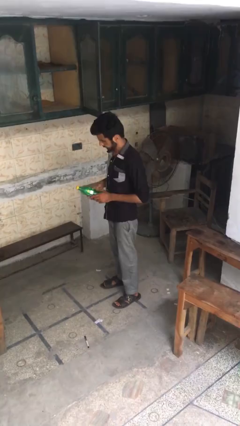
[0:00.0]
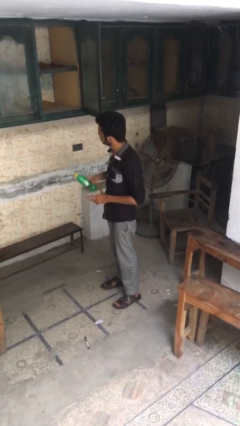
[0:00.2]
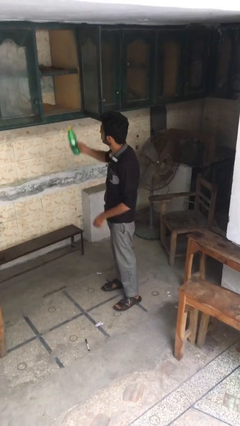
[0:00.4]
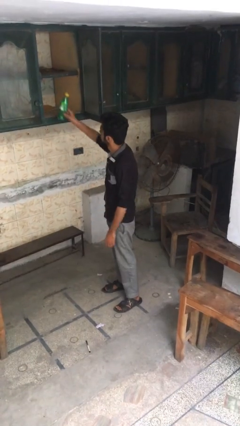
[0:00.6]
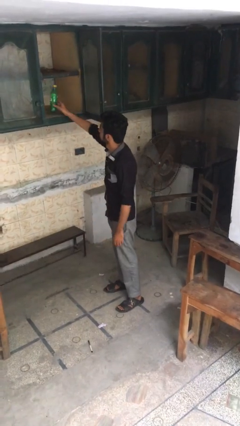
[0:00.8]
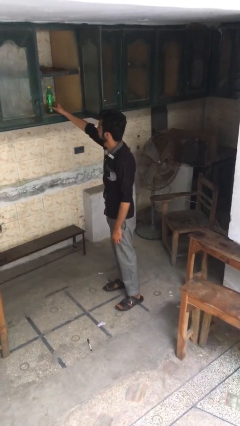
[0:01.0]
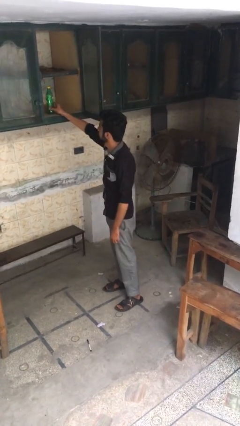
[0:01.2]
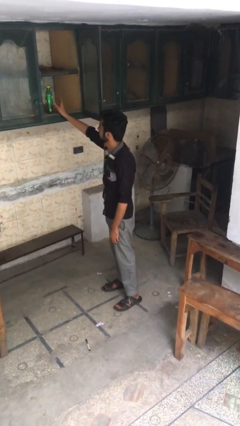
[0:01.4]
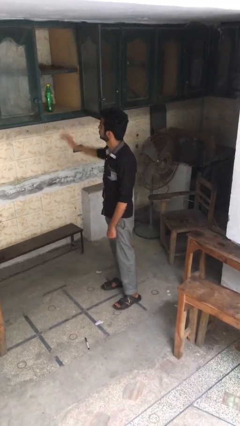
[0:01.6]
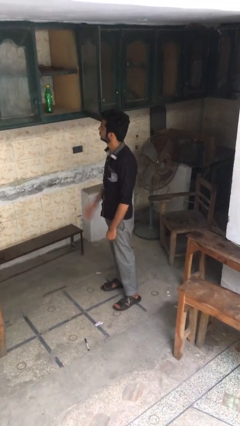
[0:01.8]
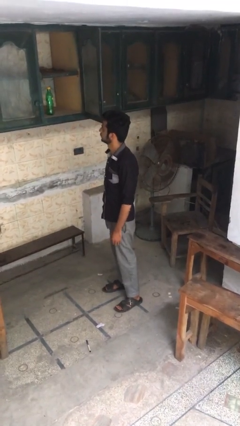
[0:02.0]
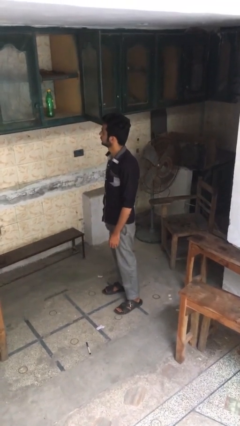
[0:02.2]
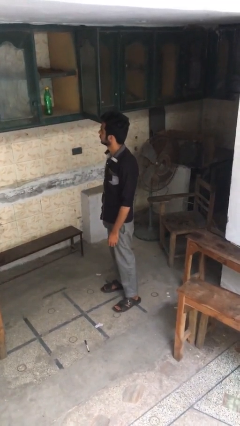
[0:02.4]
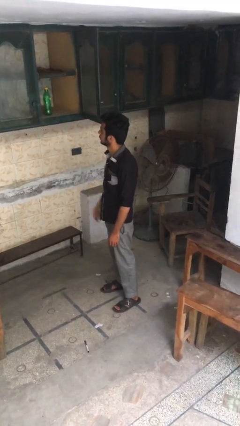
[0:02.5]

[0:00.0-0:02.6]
person puts object in cabinet

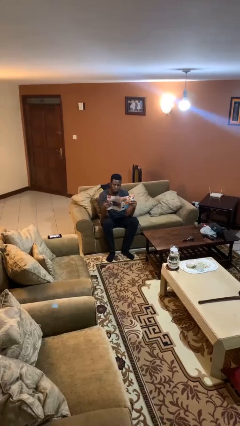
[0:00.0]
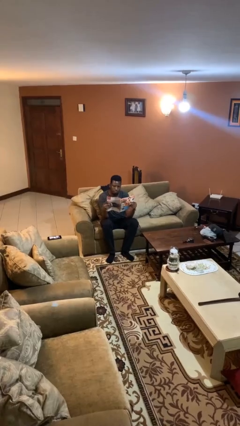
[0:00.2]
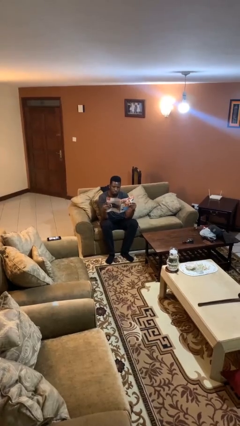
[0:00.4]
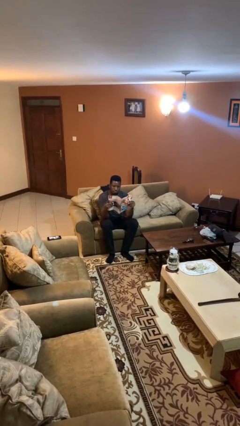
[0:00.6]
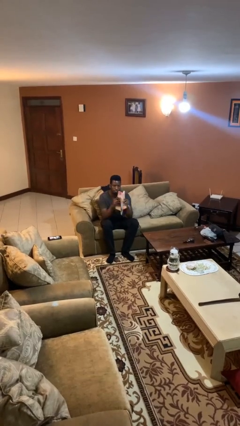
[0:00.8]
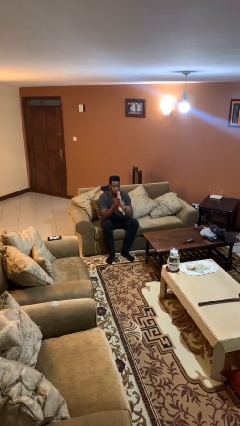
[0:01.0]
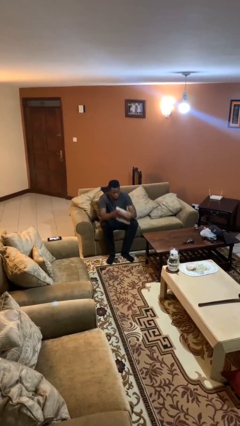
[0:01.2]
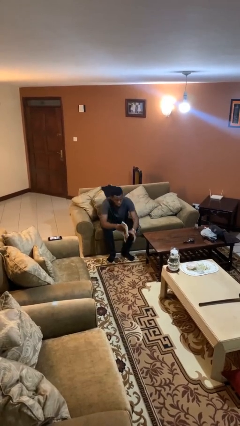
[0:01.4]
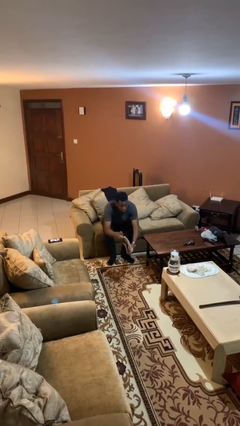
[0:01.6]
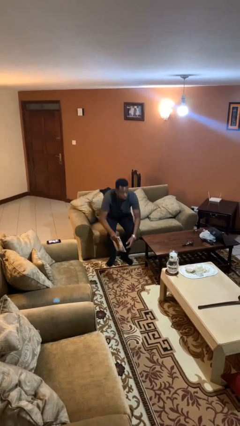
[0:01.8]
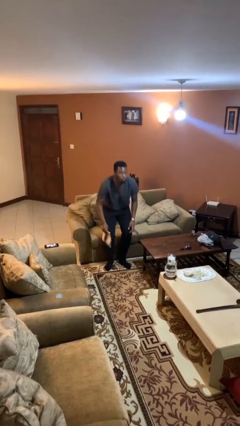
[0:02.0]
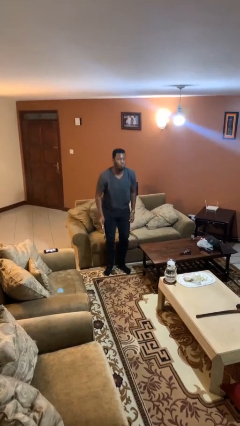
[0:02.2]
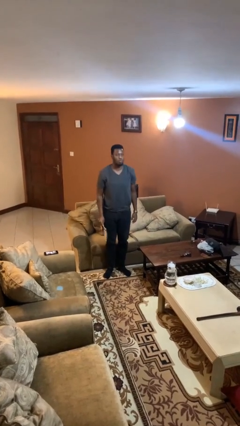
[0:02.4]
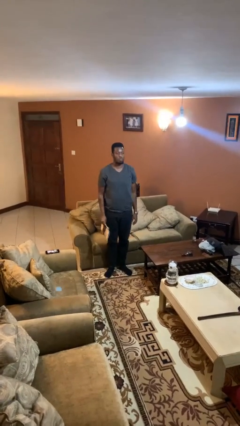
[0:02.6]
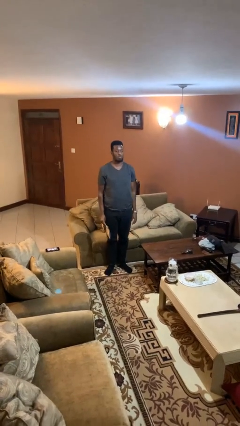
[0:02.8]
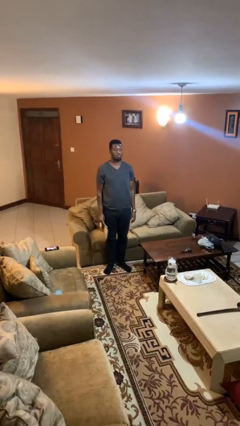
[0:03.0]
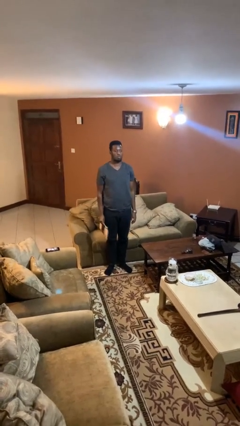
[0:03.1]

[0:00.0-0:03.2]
person stands up

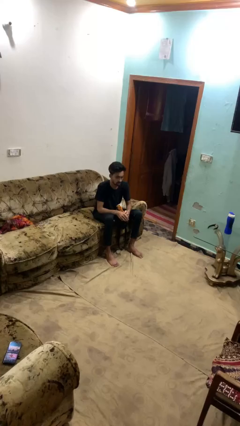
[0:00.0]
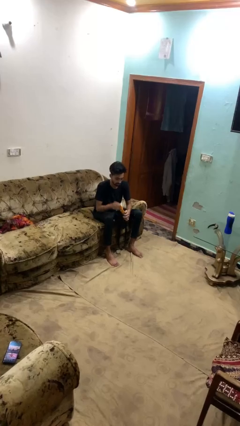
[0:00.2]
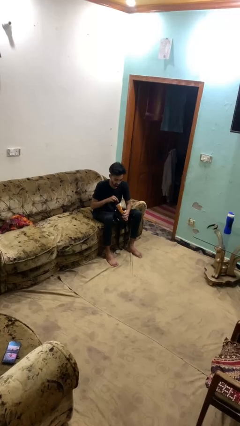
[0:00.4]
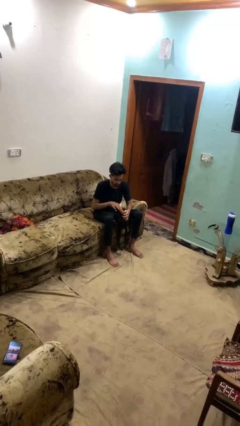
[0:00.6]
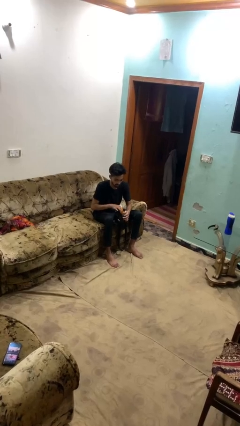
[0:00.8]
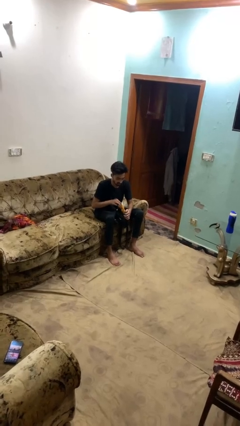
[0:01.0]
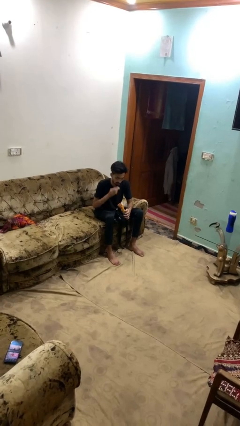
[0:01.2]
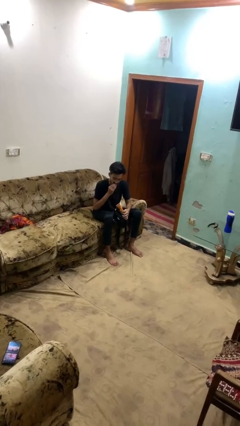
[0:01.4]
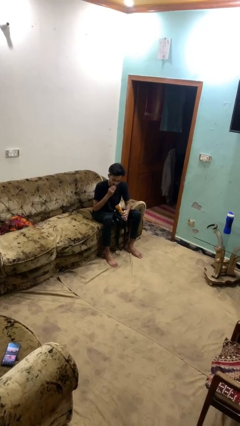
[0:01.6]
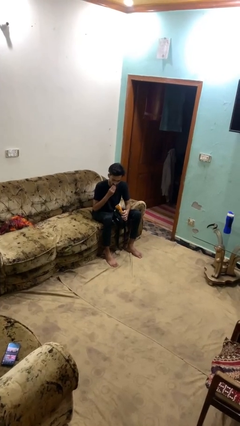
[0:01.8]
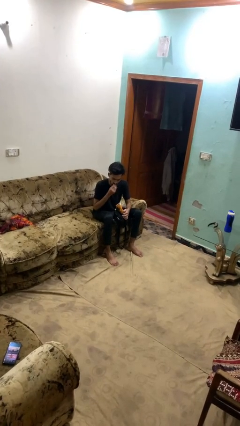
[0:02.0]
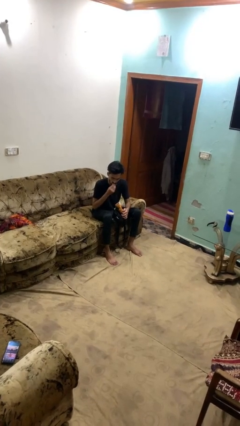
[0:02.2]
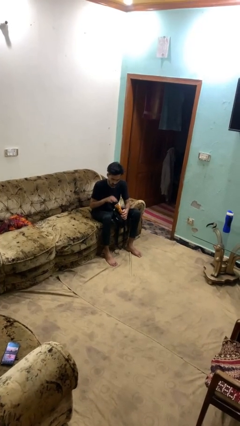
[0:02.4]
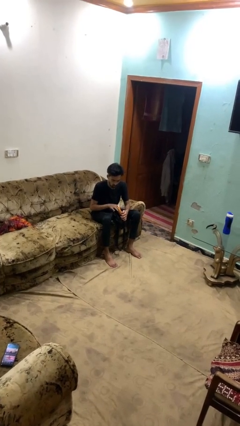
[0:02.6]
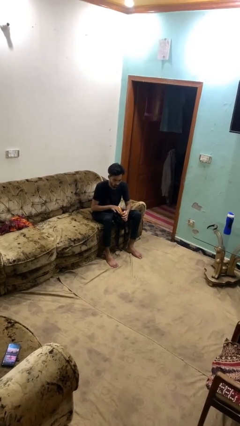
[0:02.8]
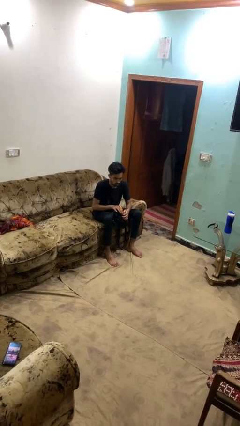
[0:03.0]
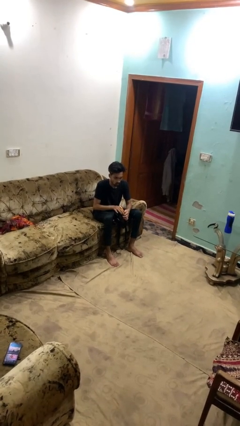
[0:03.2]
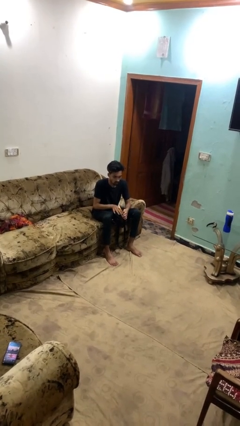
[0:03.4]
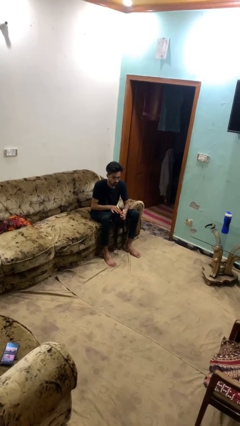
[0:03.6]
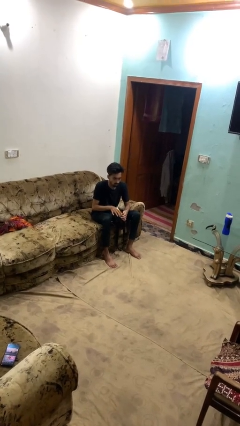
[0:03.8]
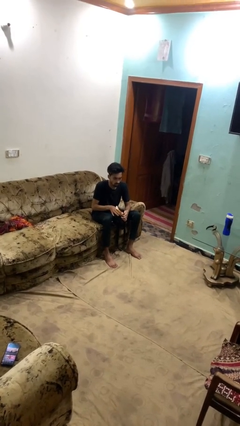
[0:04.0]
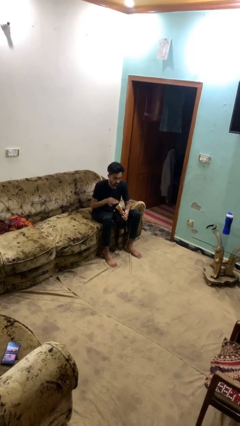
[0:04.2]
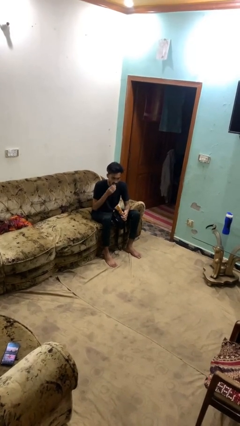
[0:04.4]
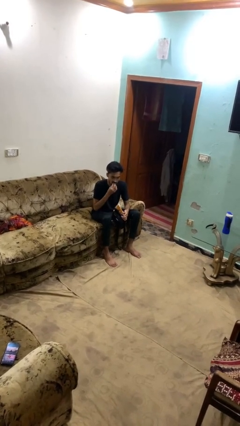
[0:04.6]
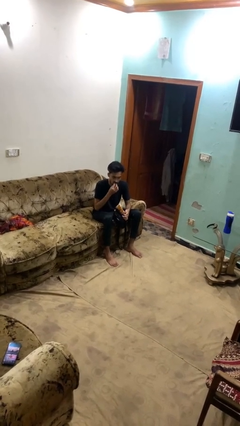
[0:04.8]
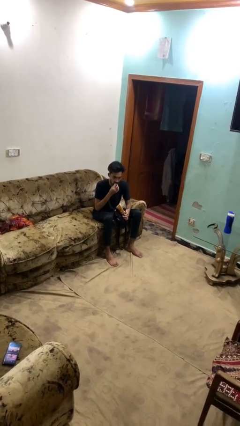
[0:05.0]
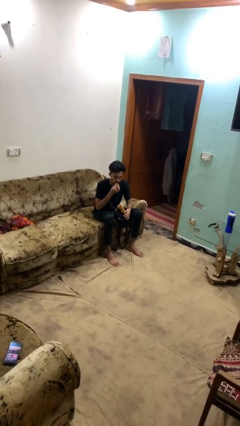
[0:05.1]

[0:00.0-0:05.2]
person eats snack from bag

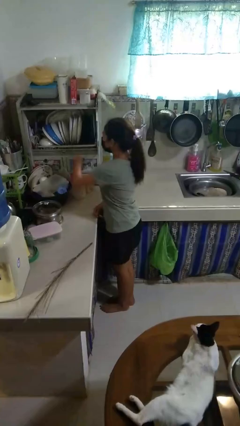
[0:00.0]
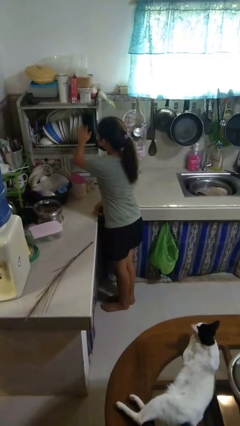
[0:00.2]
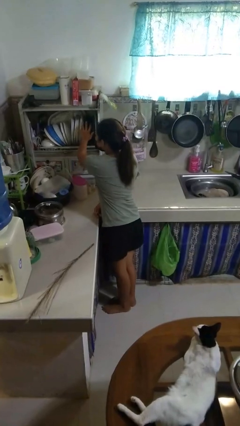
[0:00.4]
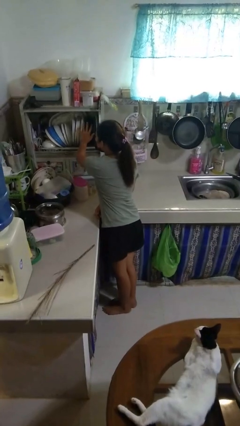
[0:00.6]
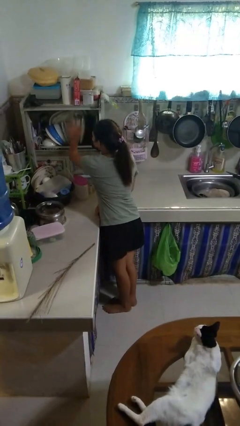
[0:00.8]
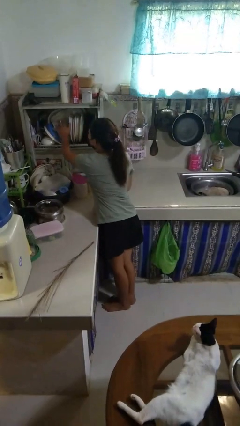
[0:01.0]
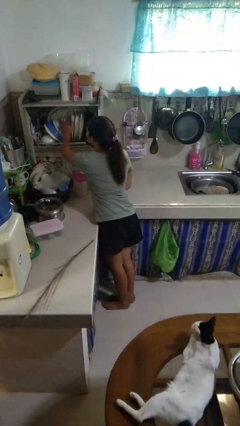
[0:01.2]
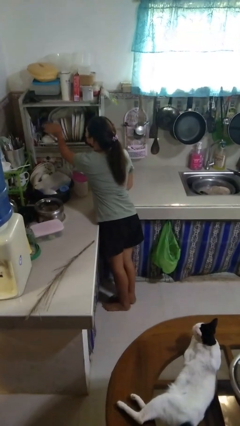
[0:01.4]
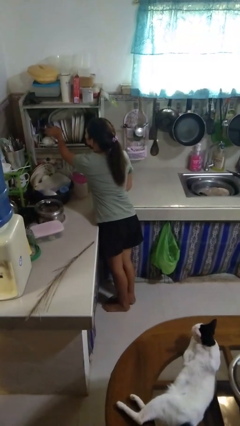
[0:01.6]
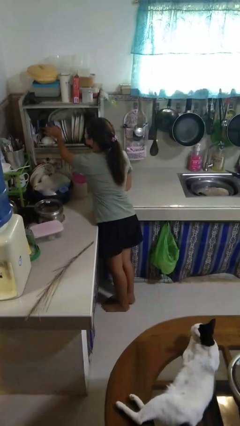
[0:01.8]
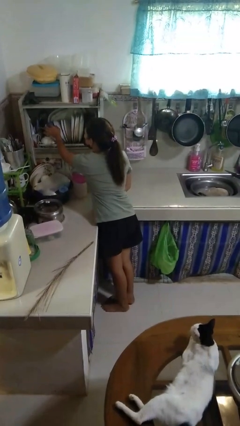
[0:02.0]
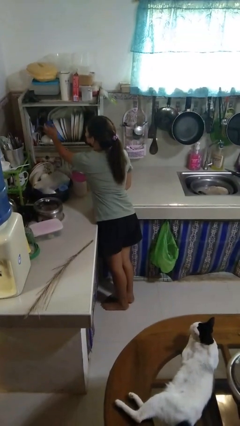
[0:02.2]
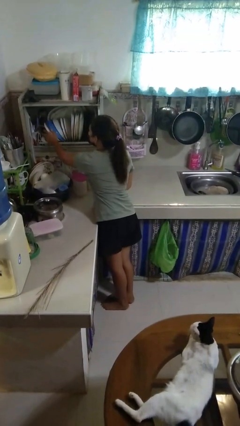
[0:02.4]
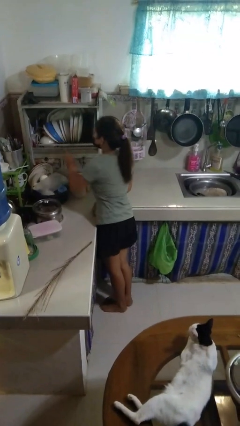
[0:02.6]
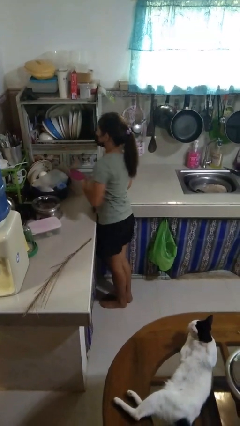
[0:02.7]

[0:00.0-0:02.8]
person searches in kitchen drawer

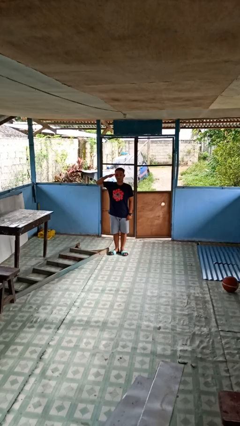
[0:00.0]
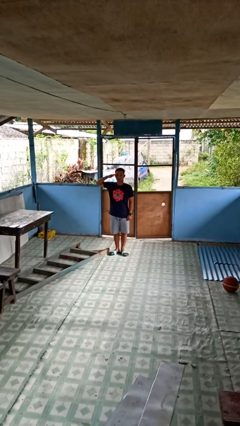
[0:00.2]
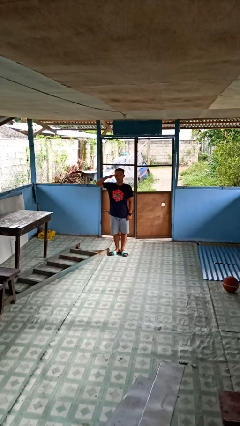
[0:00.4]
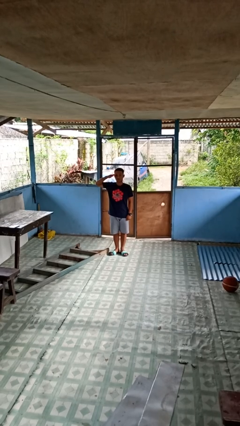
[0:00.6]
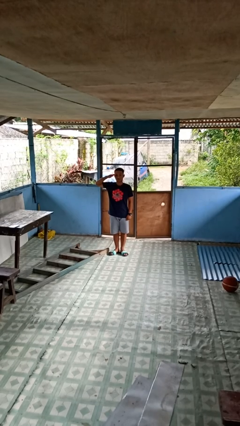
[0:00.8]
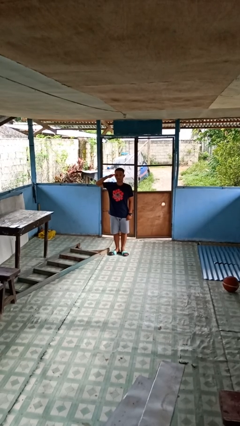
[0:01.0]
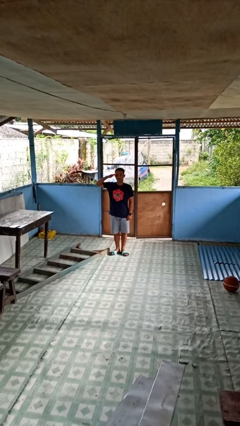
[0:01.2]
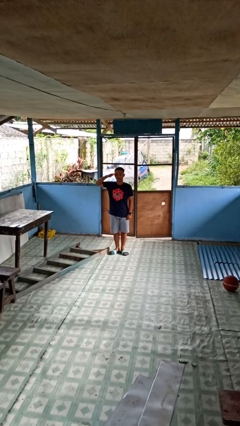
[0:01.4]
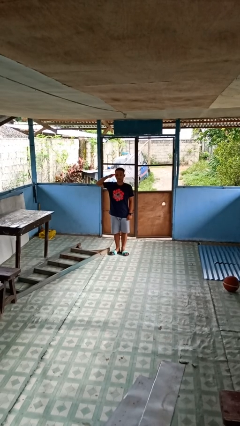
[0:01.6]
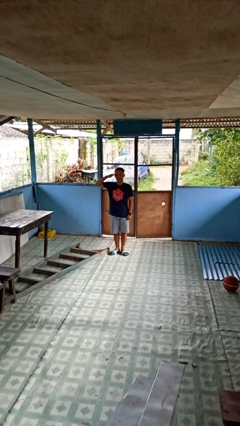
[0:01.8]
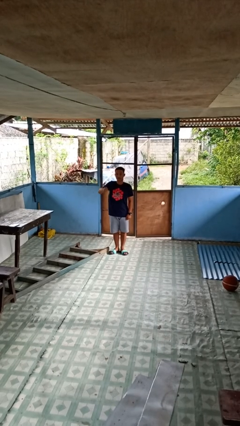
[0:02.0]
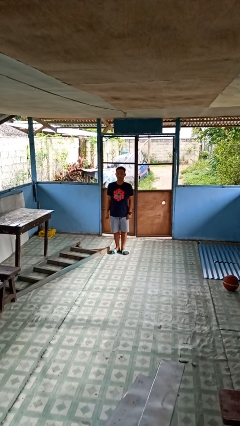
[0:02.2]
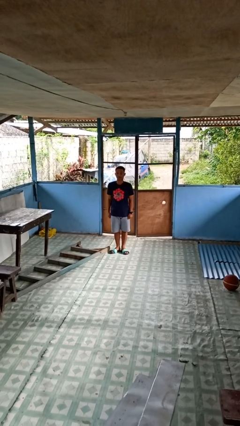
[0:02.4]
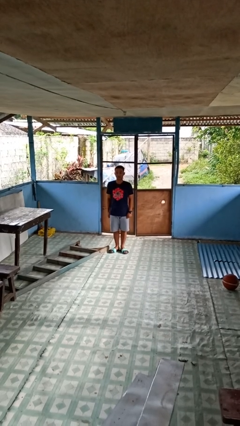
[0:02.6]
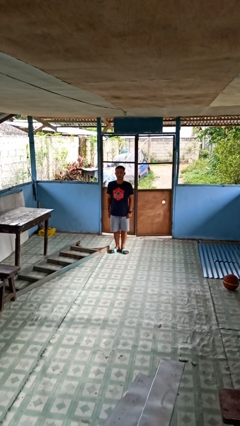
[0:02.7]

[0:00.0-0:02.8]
person salutes

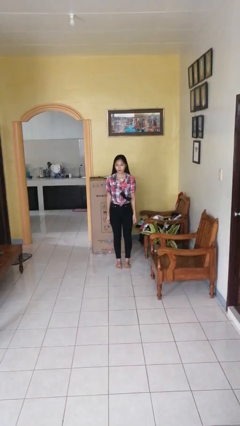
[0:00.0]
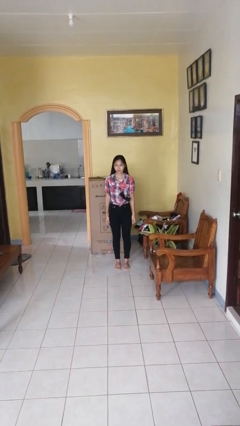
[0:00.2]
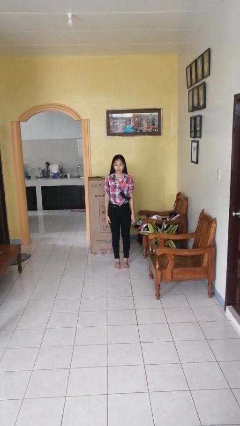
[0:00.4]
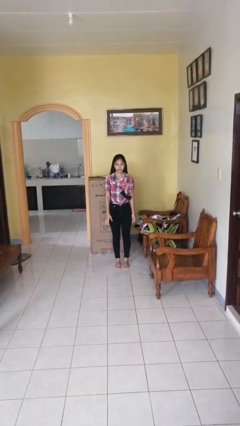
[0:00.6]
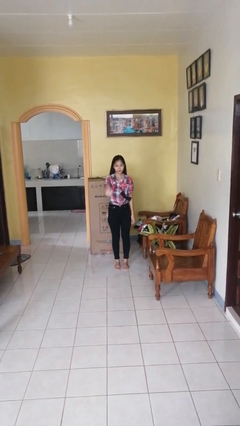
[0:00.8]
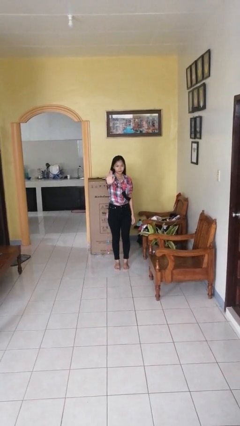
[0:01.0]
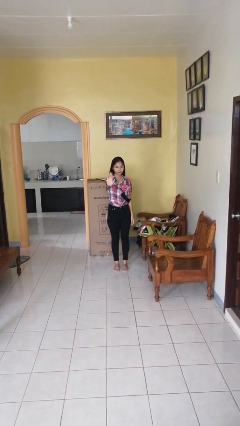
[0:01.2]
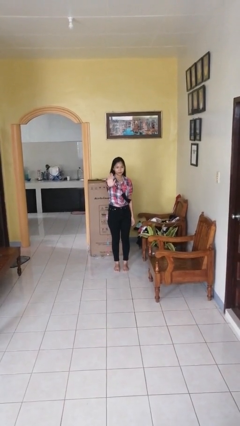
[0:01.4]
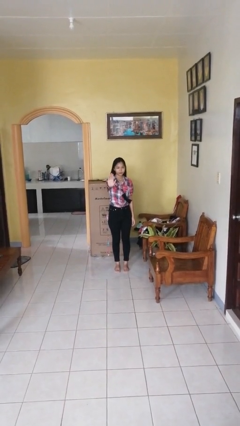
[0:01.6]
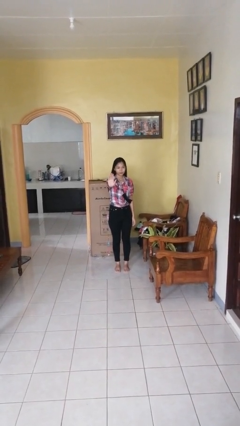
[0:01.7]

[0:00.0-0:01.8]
person gestures stop
